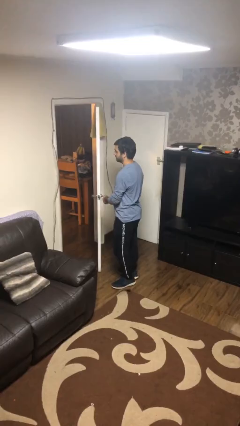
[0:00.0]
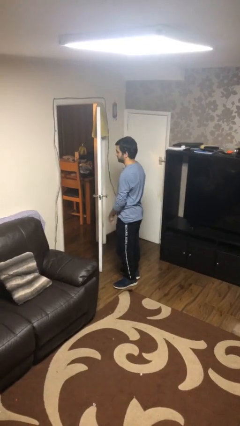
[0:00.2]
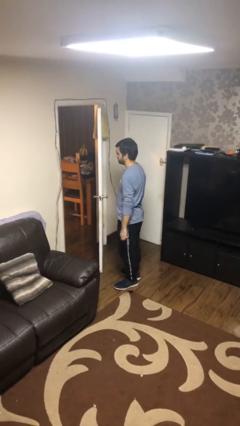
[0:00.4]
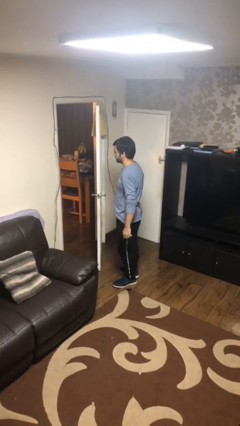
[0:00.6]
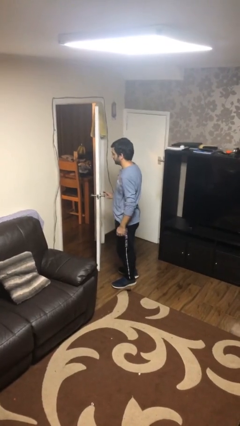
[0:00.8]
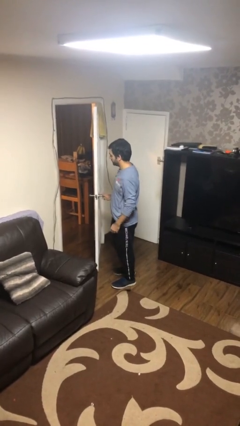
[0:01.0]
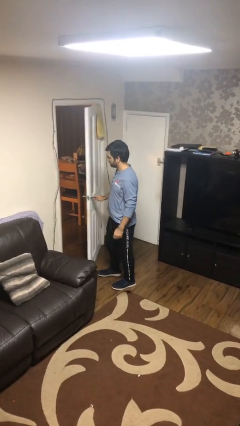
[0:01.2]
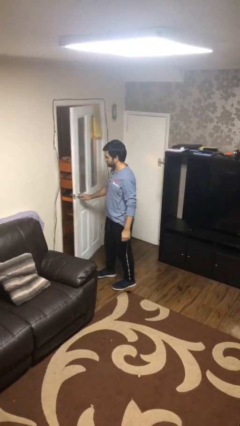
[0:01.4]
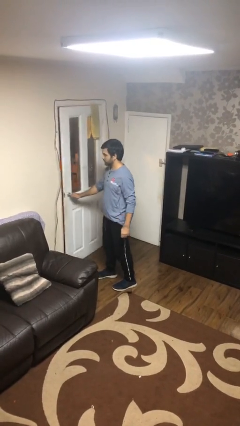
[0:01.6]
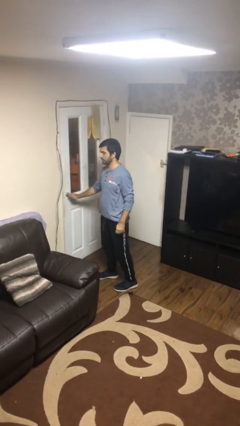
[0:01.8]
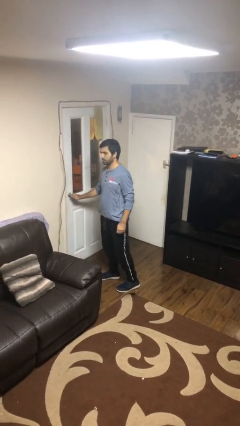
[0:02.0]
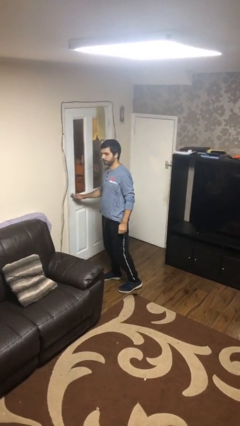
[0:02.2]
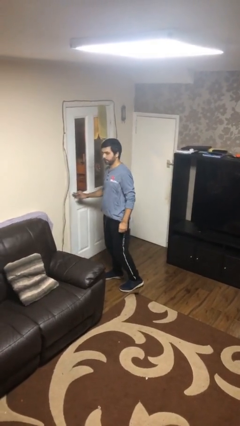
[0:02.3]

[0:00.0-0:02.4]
person closes facility door

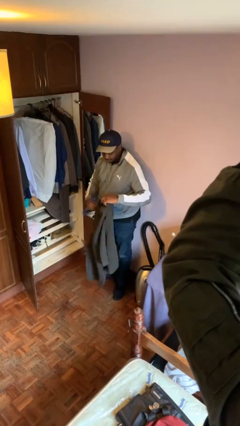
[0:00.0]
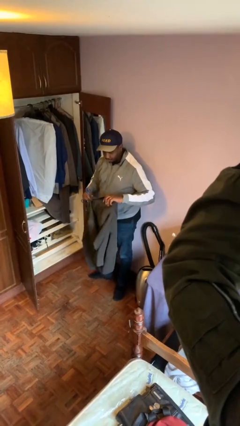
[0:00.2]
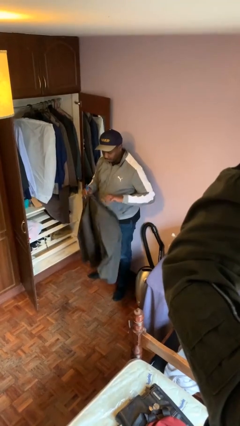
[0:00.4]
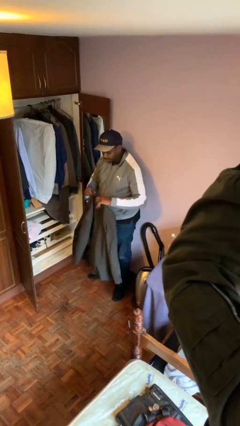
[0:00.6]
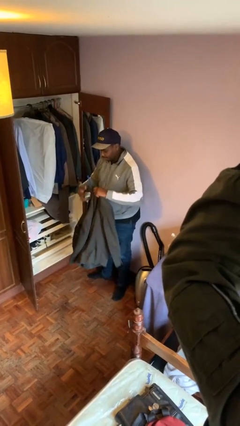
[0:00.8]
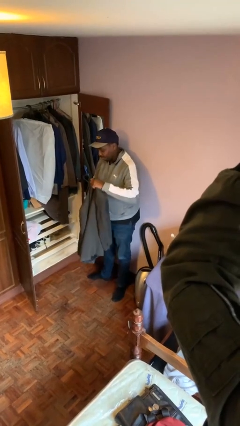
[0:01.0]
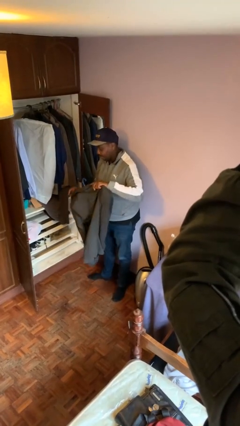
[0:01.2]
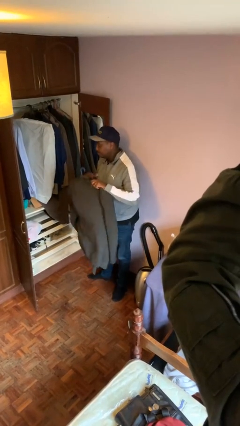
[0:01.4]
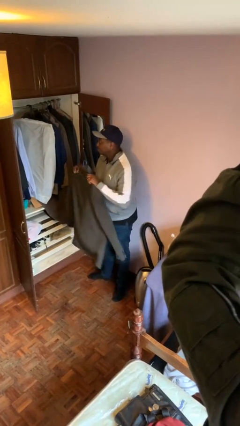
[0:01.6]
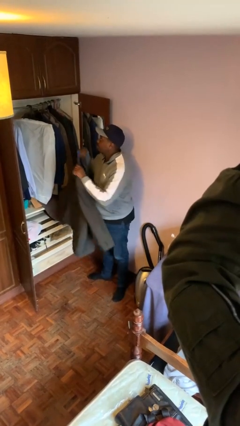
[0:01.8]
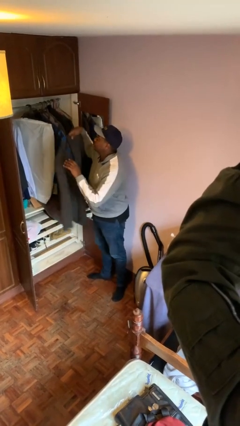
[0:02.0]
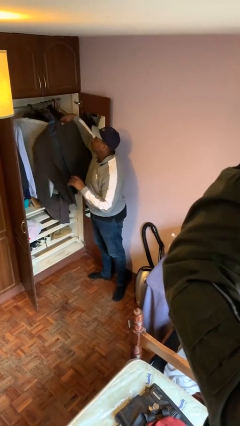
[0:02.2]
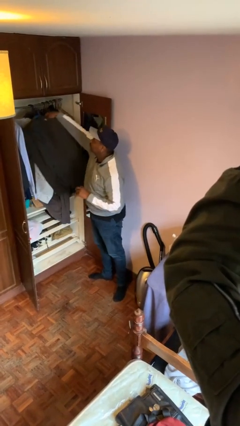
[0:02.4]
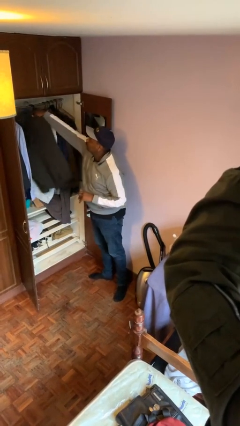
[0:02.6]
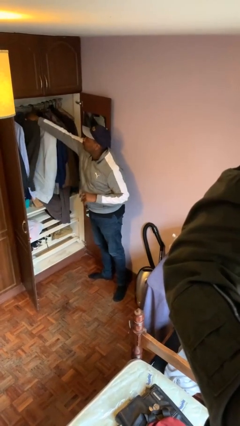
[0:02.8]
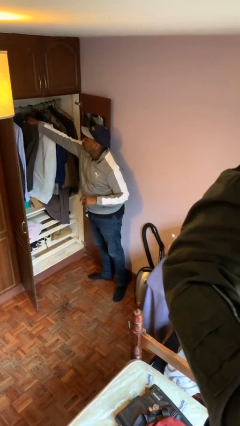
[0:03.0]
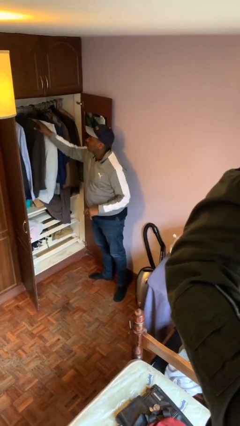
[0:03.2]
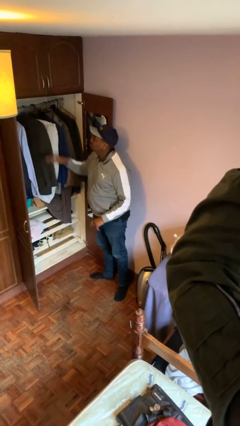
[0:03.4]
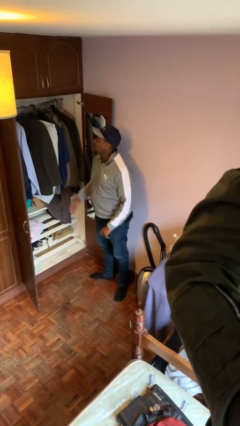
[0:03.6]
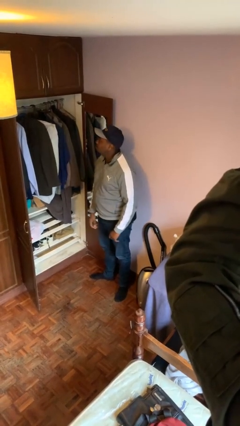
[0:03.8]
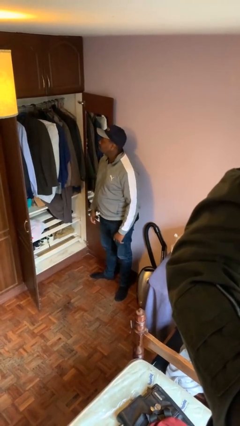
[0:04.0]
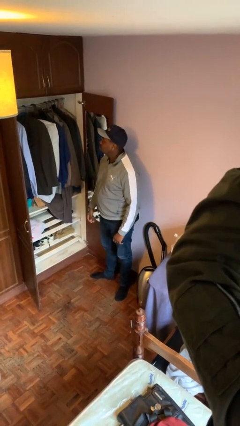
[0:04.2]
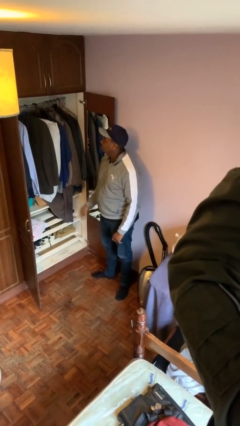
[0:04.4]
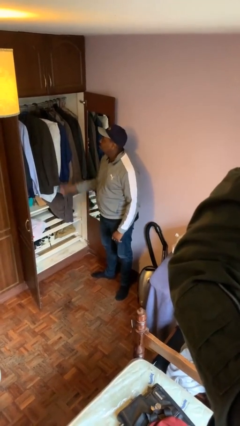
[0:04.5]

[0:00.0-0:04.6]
person puts clothes into closet

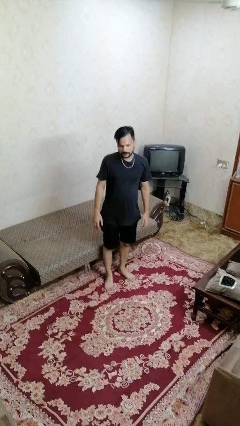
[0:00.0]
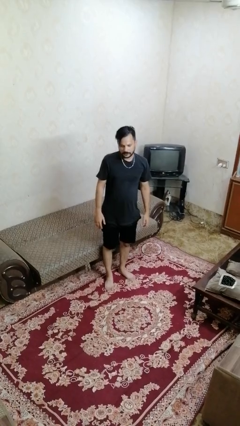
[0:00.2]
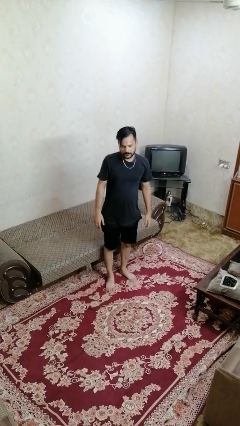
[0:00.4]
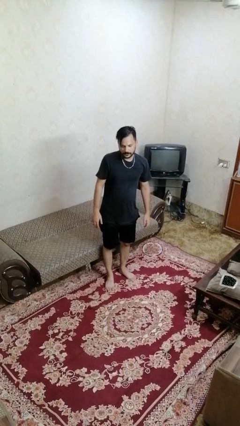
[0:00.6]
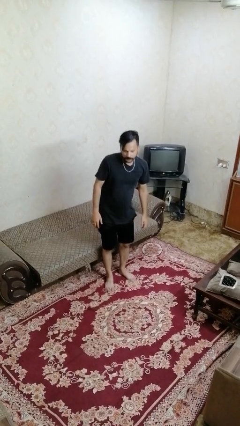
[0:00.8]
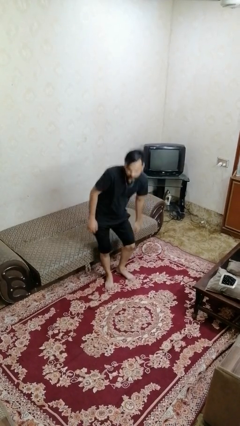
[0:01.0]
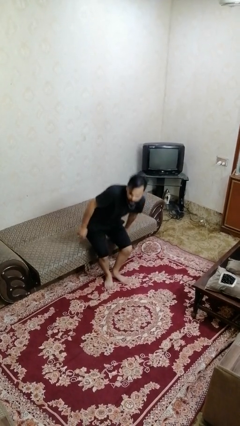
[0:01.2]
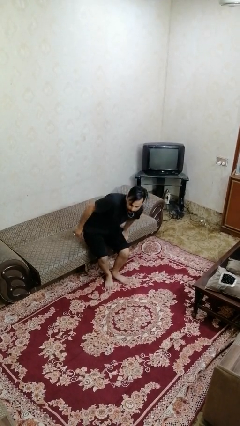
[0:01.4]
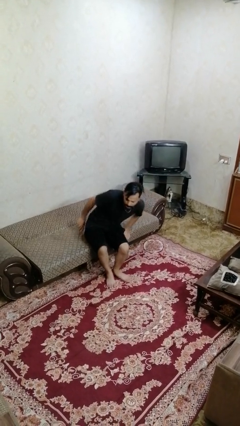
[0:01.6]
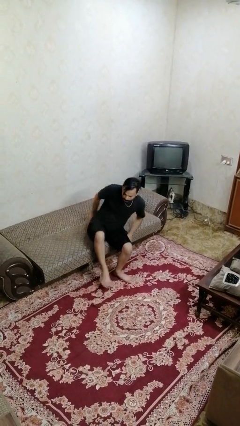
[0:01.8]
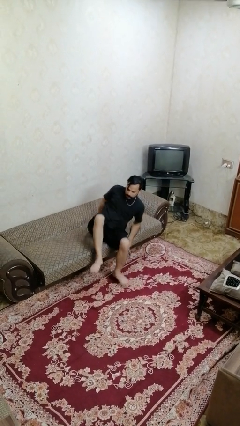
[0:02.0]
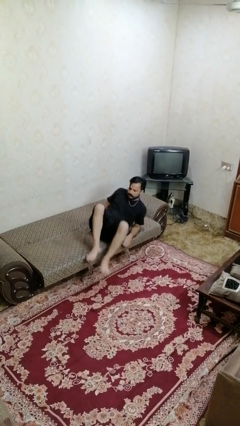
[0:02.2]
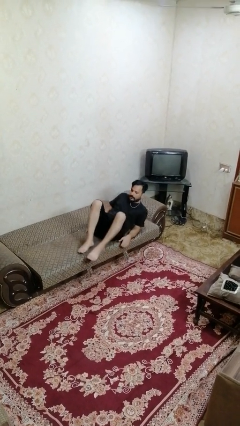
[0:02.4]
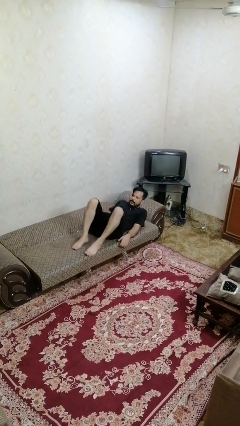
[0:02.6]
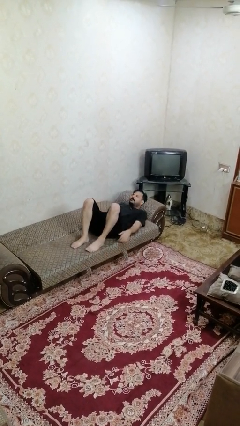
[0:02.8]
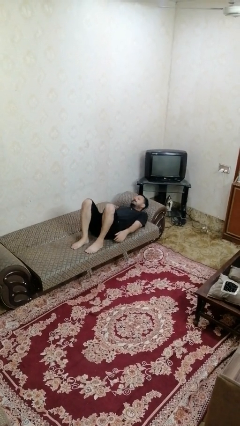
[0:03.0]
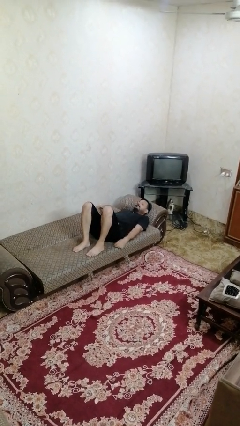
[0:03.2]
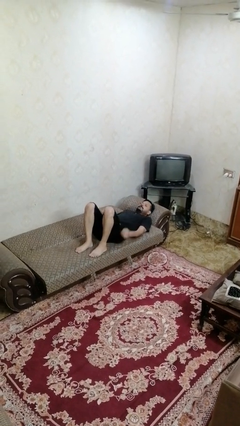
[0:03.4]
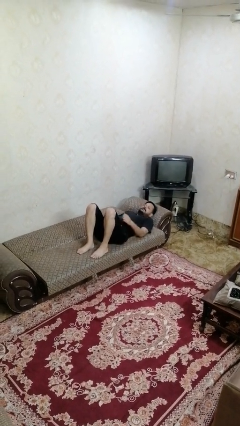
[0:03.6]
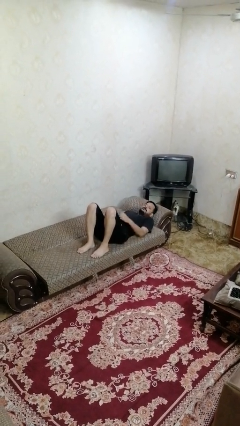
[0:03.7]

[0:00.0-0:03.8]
person lies down on bed

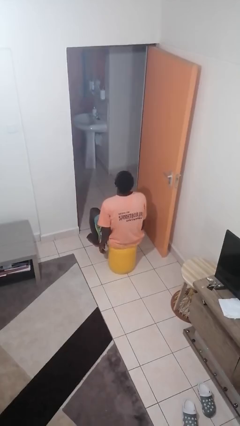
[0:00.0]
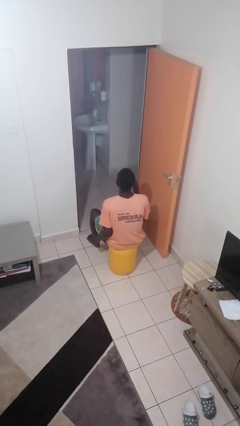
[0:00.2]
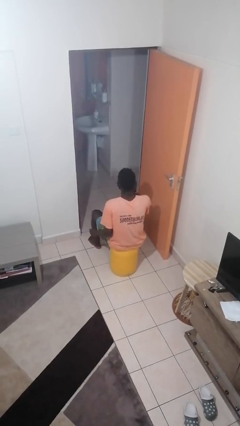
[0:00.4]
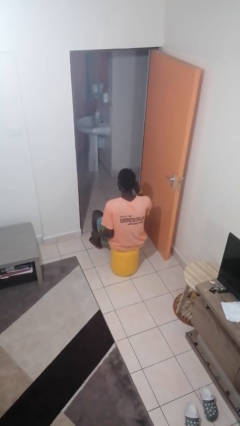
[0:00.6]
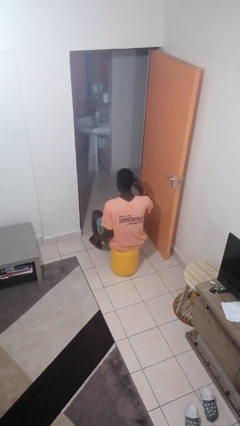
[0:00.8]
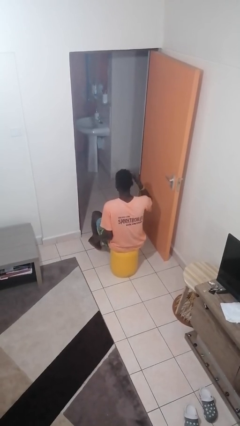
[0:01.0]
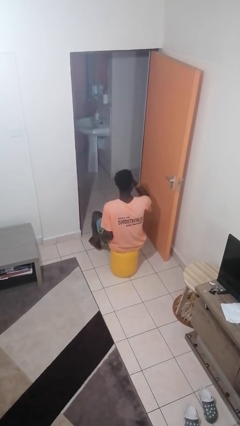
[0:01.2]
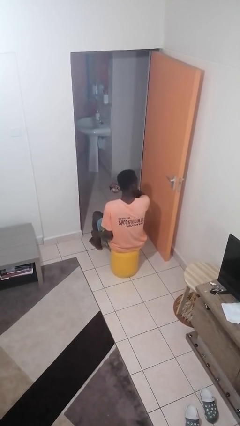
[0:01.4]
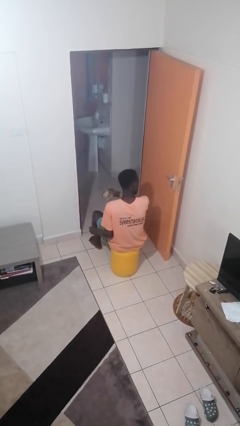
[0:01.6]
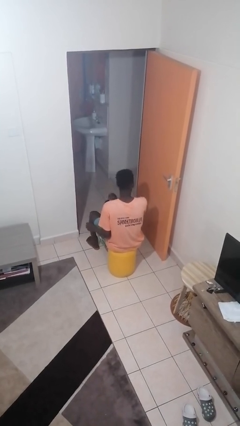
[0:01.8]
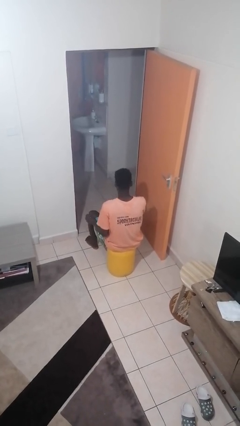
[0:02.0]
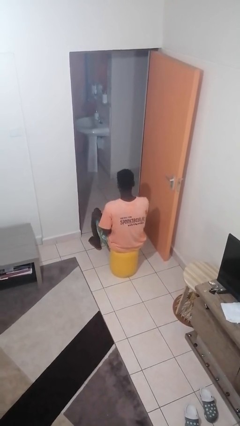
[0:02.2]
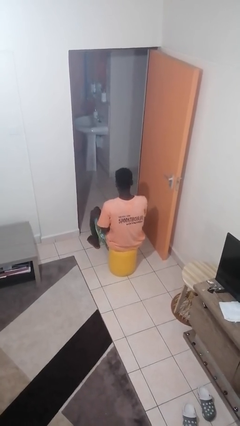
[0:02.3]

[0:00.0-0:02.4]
person takes off facemask

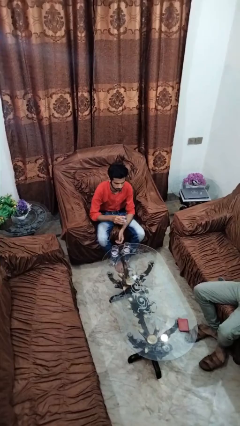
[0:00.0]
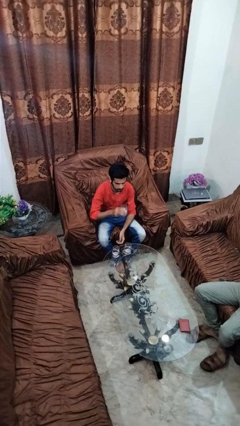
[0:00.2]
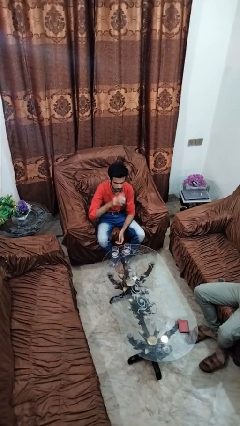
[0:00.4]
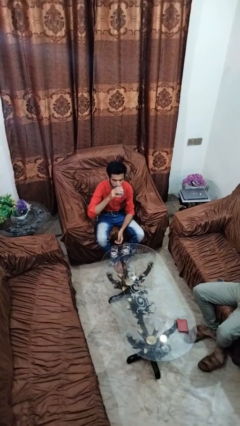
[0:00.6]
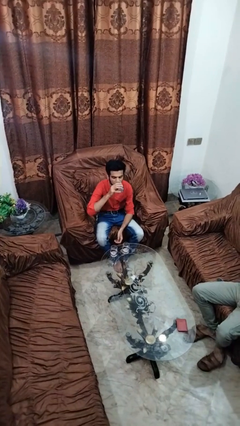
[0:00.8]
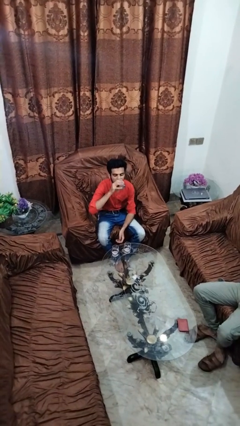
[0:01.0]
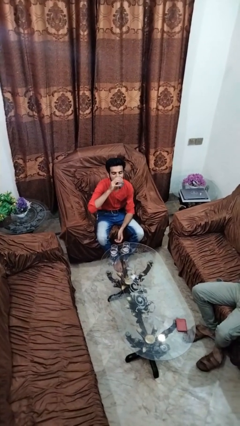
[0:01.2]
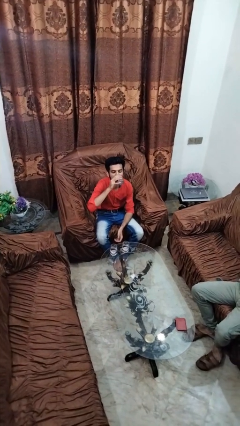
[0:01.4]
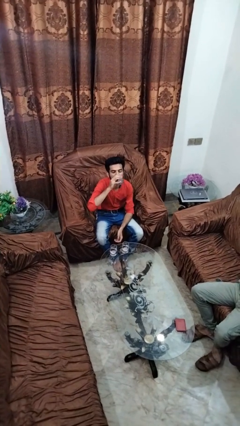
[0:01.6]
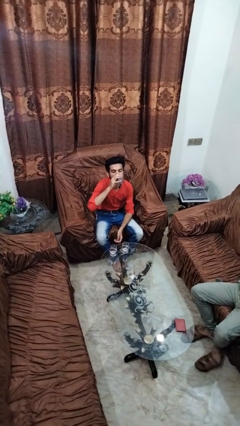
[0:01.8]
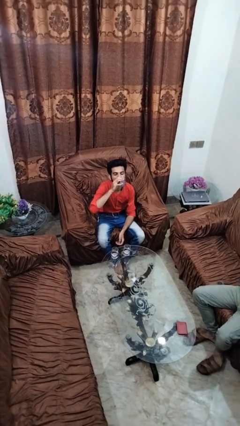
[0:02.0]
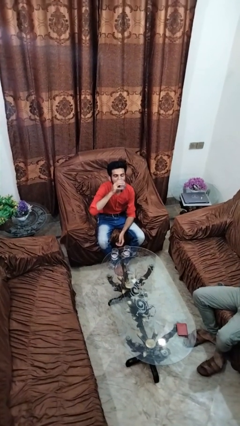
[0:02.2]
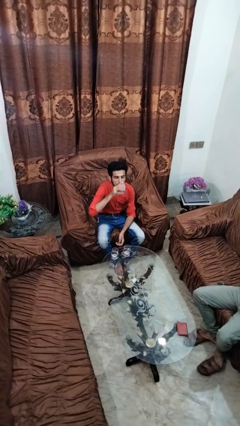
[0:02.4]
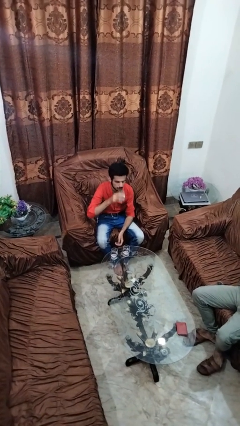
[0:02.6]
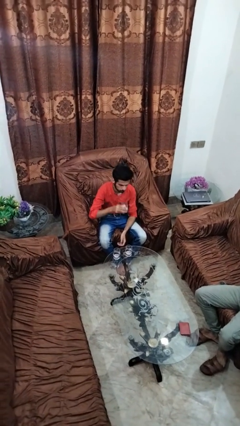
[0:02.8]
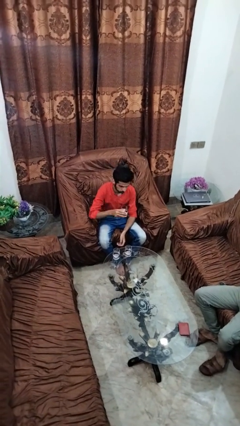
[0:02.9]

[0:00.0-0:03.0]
person drinks from shotglass

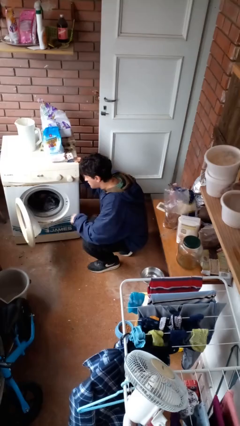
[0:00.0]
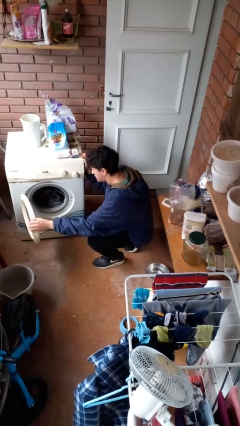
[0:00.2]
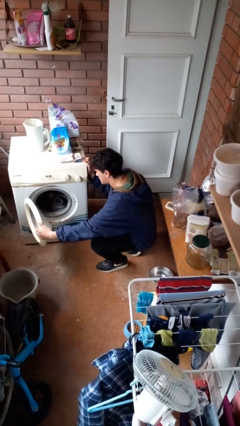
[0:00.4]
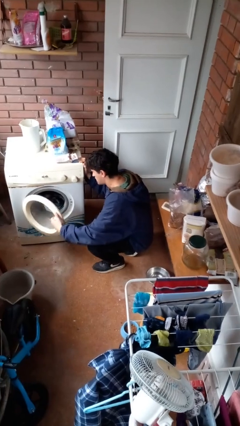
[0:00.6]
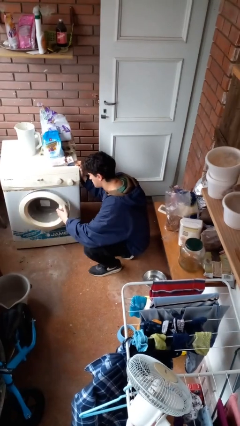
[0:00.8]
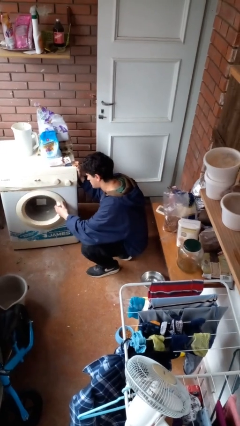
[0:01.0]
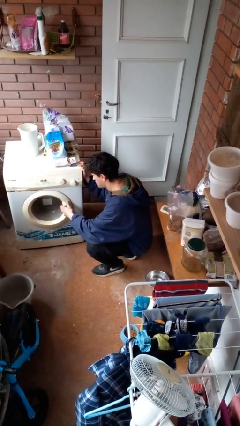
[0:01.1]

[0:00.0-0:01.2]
person closes clothes washer
